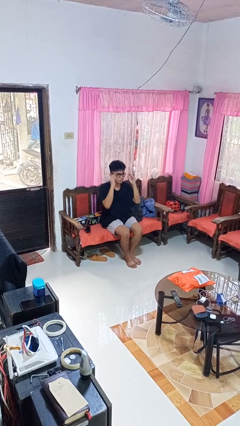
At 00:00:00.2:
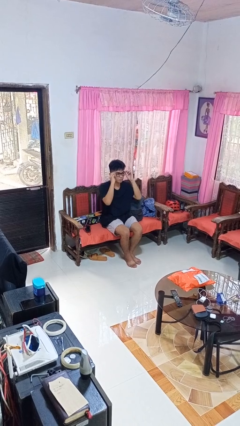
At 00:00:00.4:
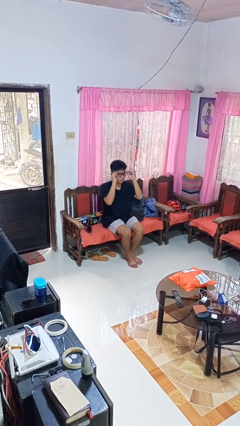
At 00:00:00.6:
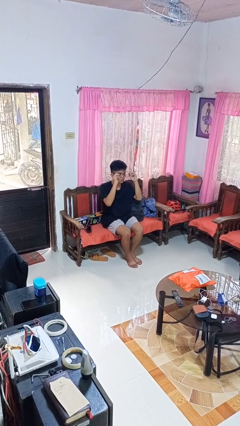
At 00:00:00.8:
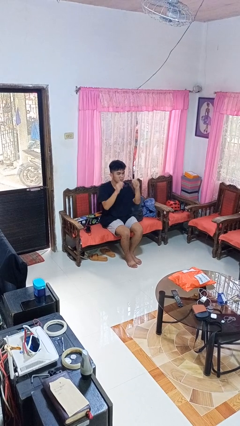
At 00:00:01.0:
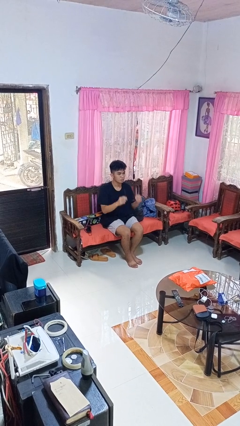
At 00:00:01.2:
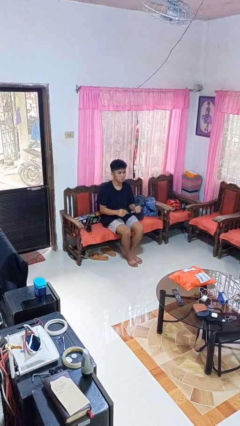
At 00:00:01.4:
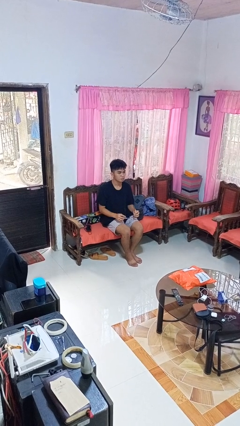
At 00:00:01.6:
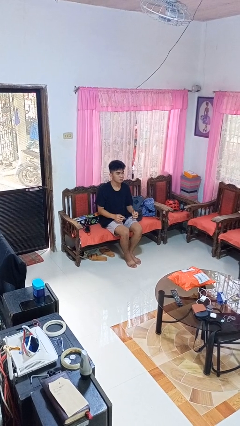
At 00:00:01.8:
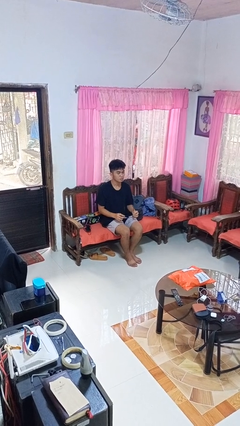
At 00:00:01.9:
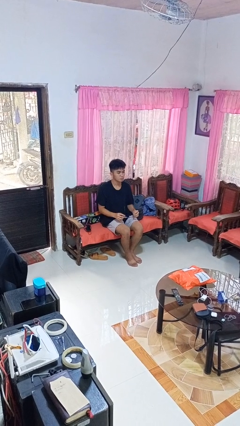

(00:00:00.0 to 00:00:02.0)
person takes off glasses

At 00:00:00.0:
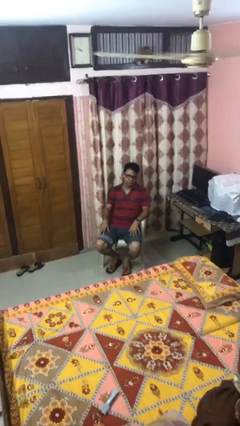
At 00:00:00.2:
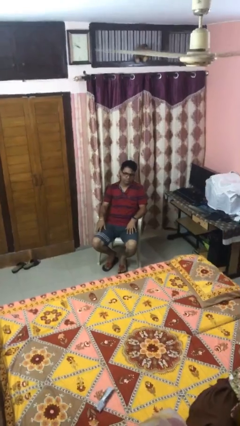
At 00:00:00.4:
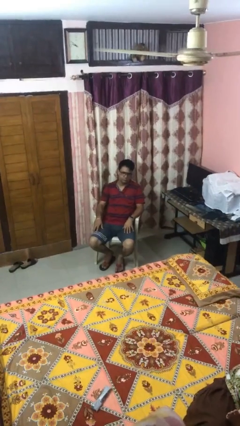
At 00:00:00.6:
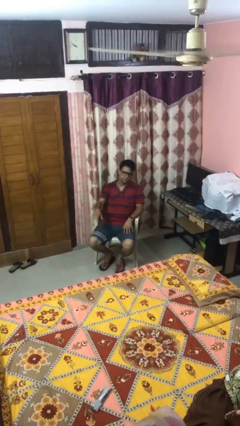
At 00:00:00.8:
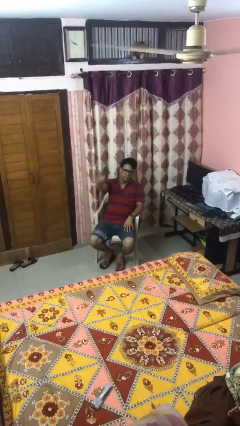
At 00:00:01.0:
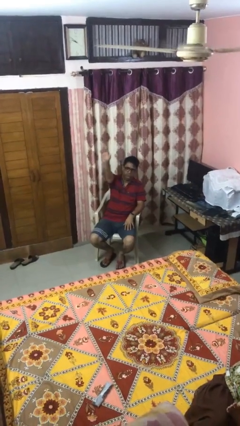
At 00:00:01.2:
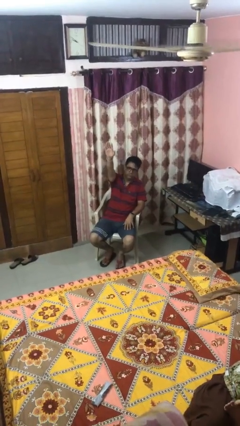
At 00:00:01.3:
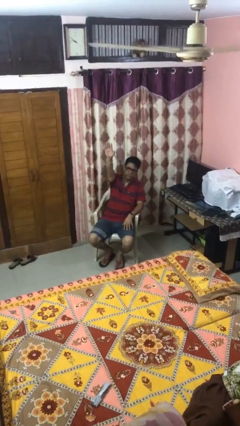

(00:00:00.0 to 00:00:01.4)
person gestures raise hand

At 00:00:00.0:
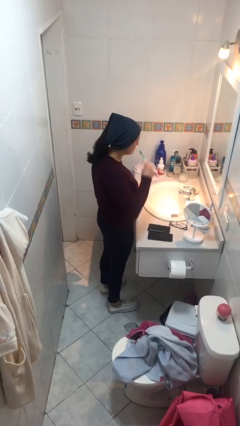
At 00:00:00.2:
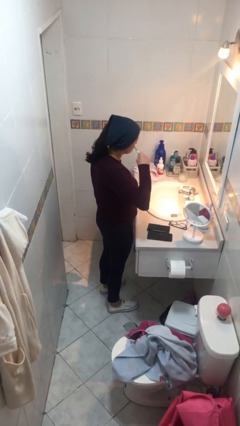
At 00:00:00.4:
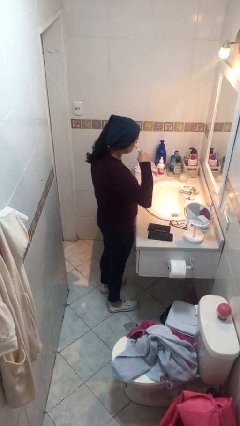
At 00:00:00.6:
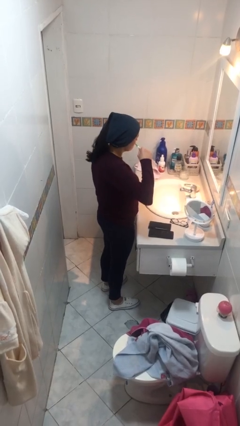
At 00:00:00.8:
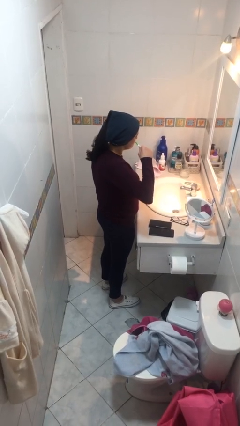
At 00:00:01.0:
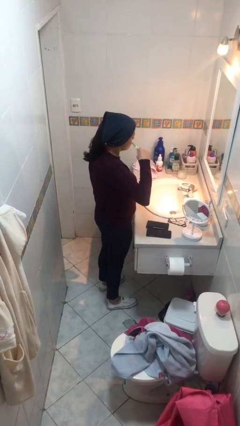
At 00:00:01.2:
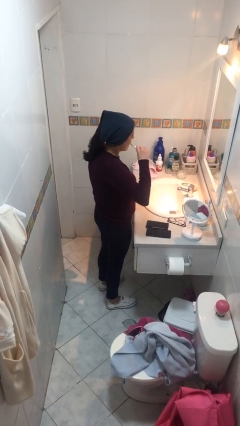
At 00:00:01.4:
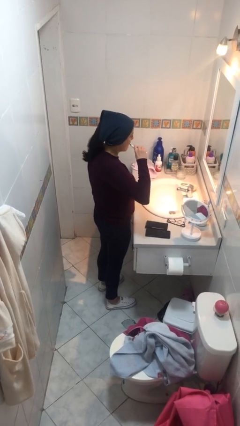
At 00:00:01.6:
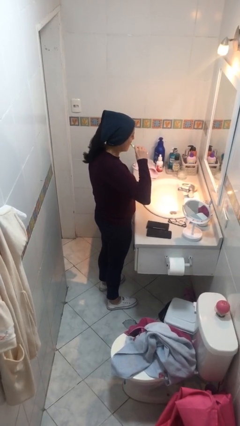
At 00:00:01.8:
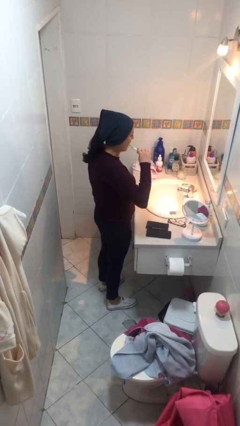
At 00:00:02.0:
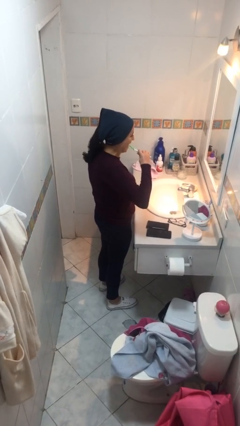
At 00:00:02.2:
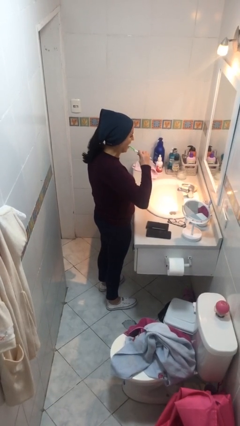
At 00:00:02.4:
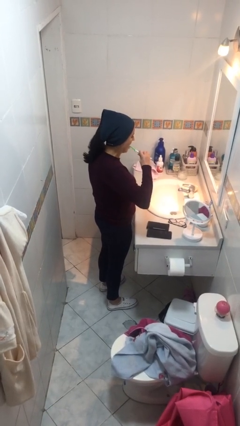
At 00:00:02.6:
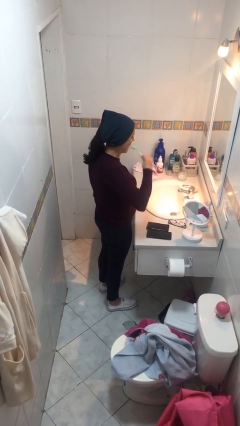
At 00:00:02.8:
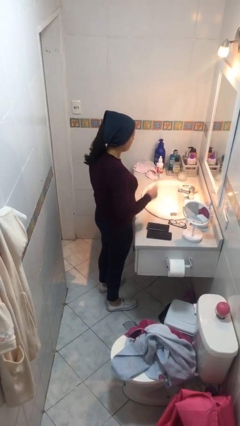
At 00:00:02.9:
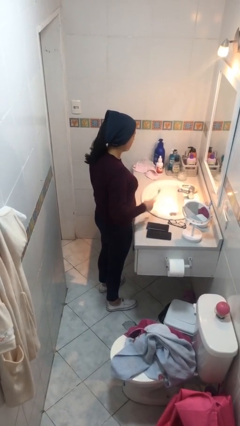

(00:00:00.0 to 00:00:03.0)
person brushes teeth

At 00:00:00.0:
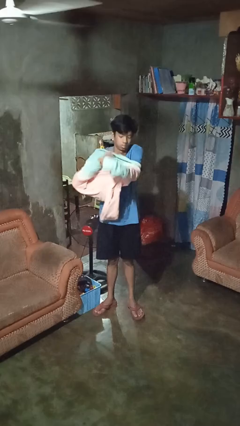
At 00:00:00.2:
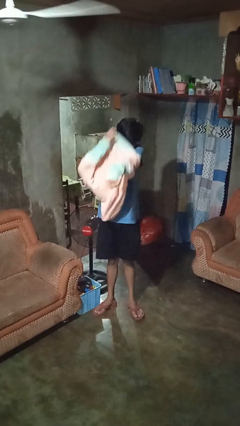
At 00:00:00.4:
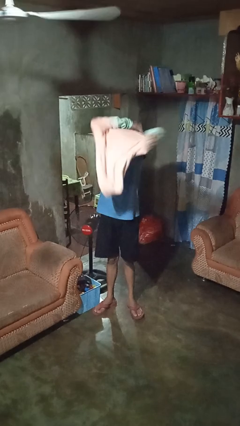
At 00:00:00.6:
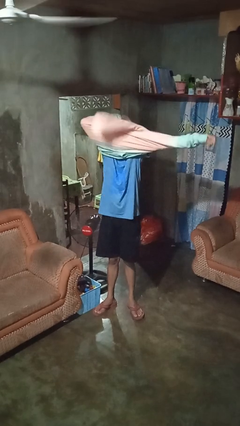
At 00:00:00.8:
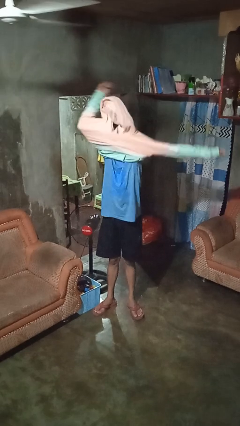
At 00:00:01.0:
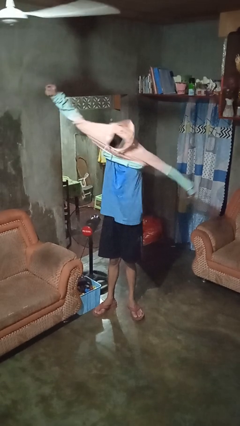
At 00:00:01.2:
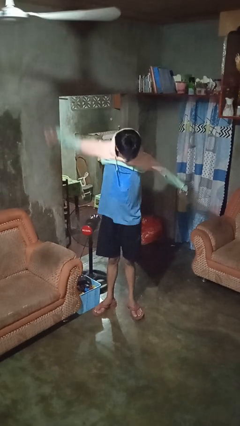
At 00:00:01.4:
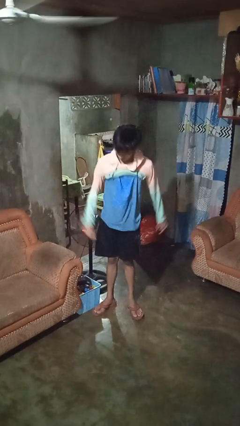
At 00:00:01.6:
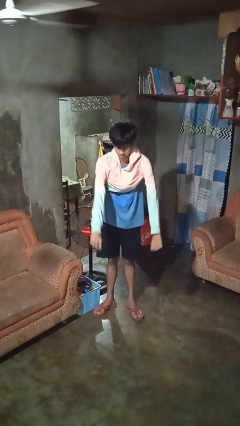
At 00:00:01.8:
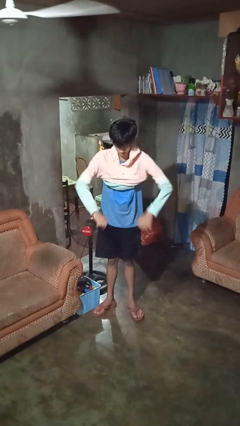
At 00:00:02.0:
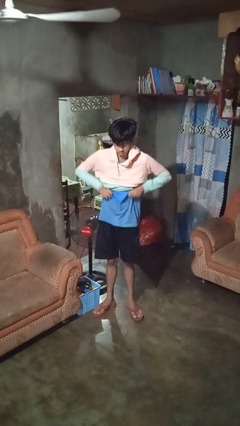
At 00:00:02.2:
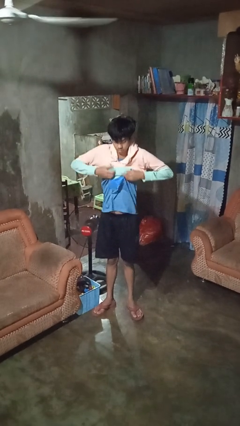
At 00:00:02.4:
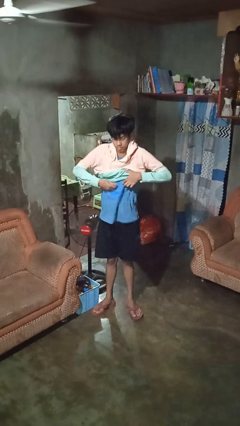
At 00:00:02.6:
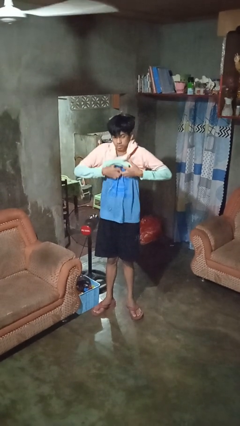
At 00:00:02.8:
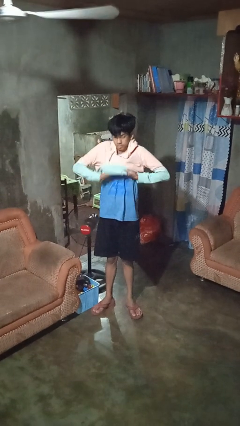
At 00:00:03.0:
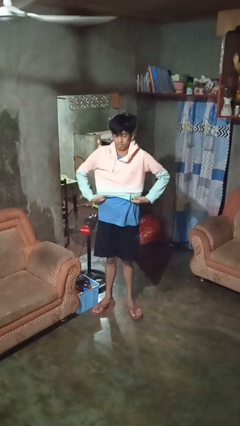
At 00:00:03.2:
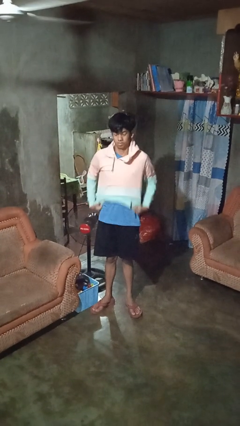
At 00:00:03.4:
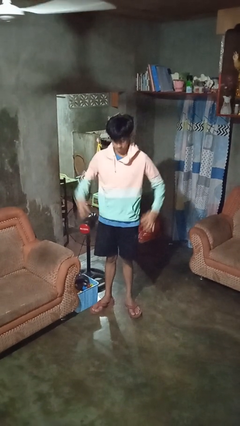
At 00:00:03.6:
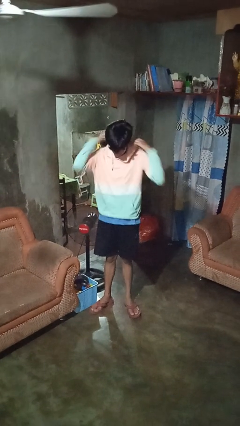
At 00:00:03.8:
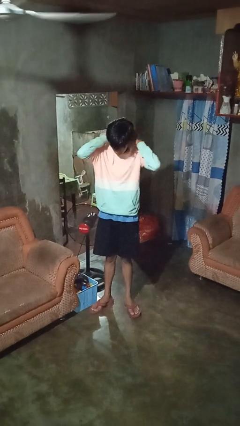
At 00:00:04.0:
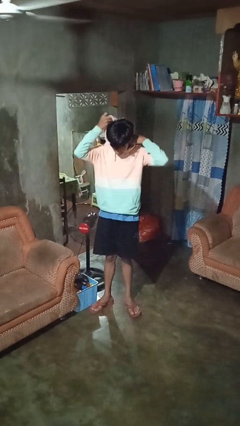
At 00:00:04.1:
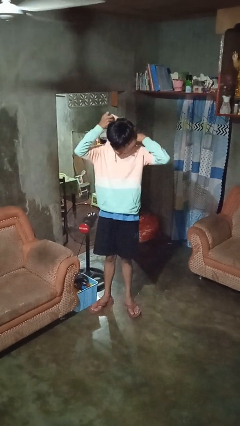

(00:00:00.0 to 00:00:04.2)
person puts on hoodie

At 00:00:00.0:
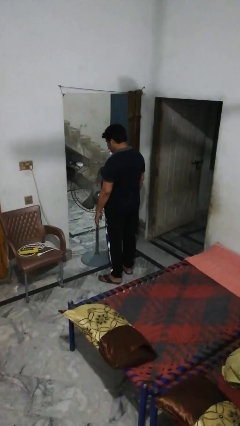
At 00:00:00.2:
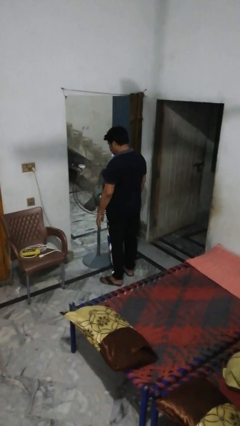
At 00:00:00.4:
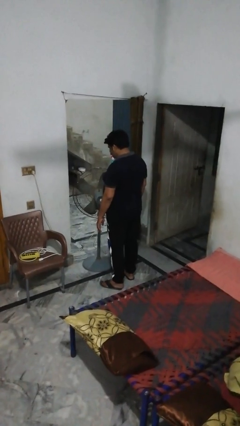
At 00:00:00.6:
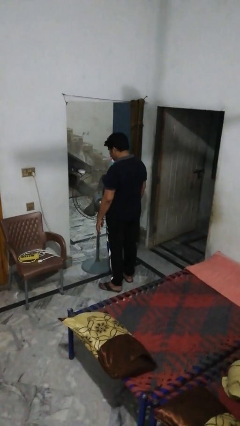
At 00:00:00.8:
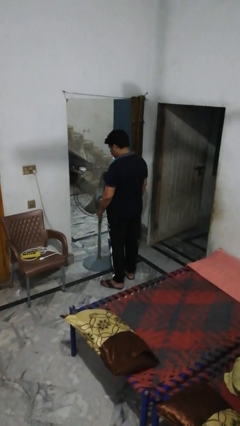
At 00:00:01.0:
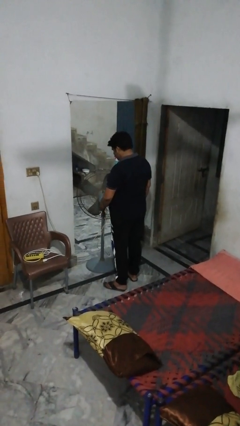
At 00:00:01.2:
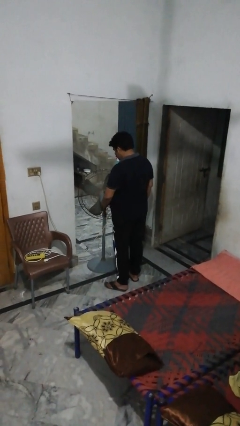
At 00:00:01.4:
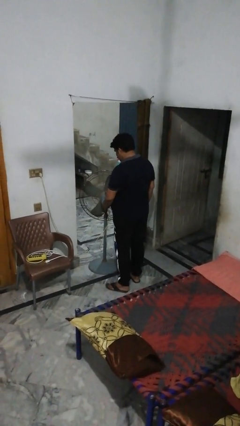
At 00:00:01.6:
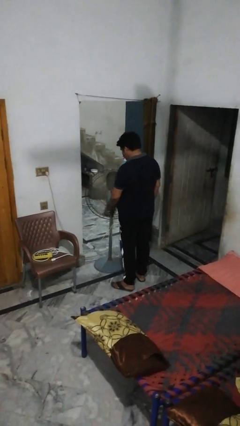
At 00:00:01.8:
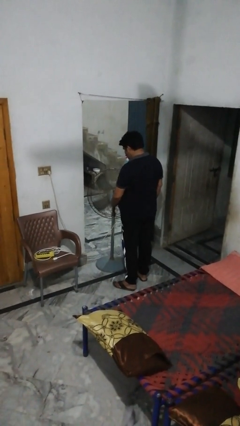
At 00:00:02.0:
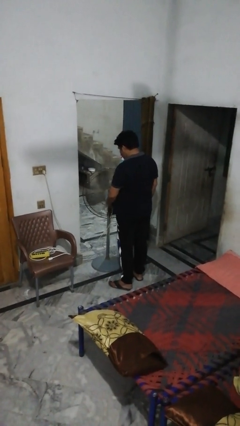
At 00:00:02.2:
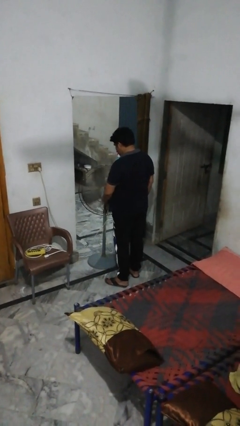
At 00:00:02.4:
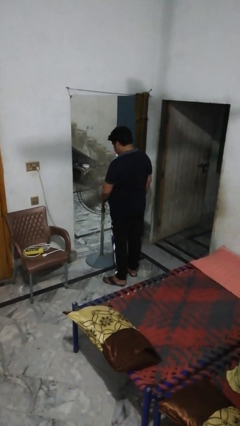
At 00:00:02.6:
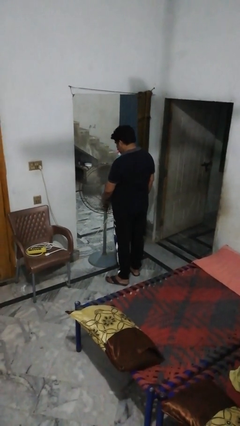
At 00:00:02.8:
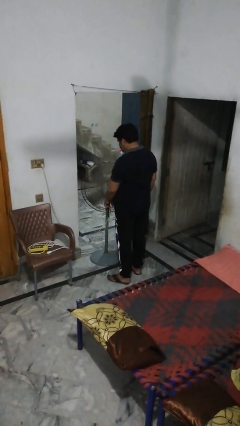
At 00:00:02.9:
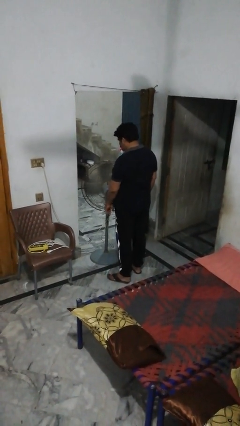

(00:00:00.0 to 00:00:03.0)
person turns on fan

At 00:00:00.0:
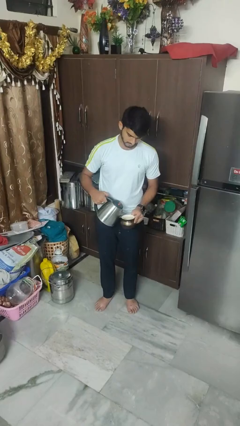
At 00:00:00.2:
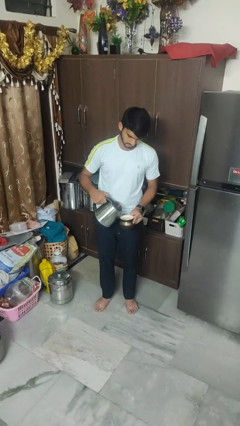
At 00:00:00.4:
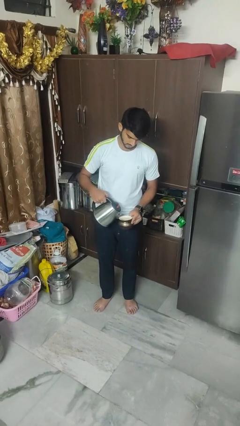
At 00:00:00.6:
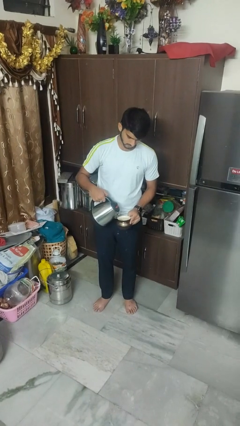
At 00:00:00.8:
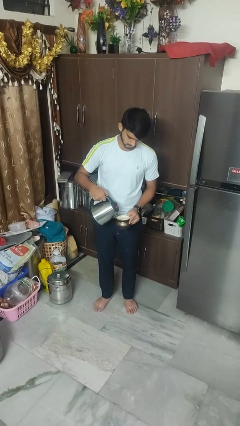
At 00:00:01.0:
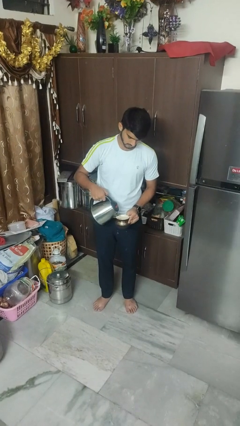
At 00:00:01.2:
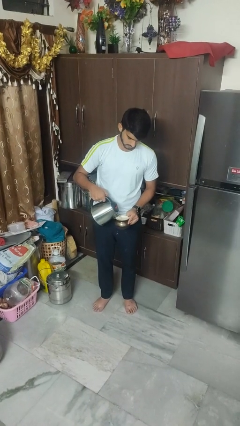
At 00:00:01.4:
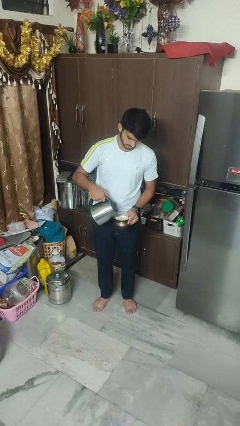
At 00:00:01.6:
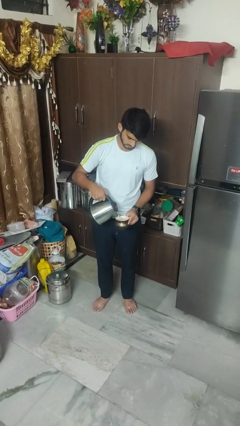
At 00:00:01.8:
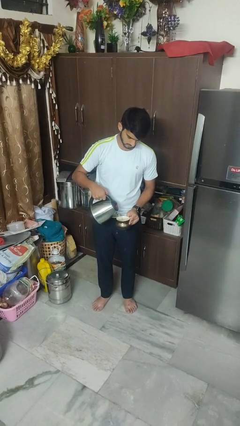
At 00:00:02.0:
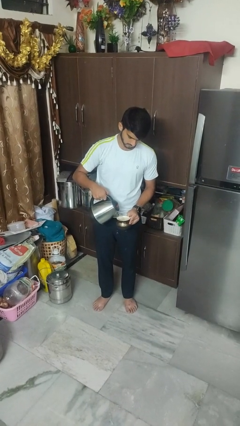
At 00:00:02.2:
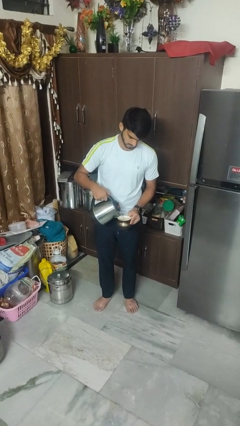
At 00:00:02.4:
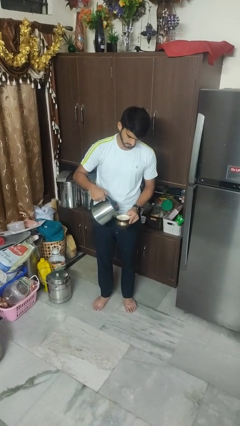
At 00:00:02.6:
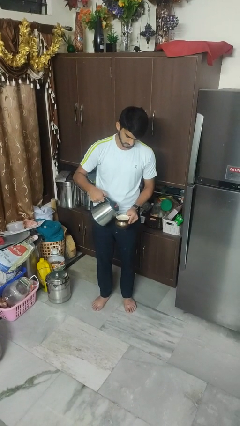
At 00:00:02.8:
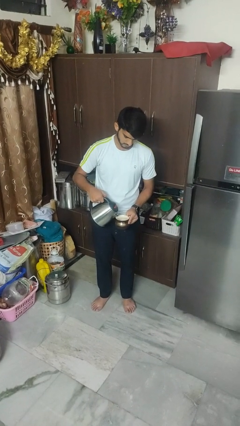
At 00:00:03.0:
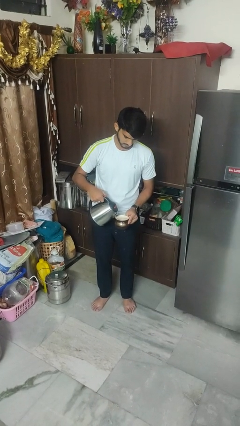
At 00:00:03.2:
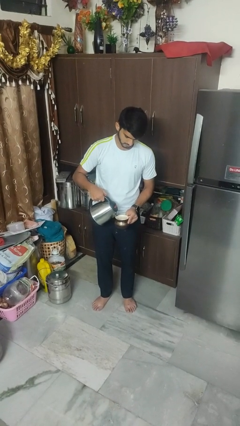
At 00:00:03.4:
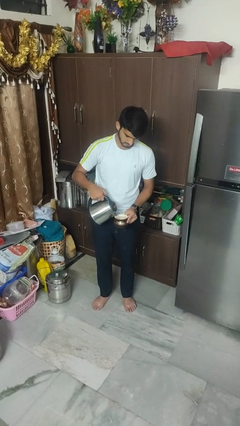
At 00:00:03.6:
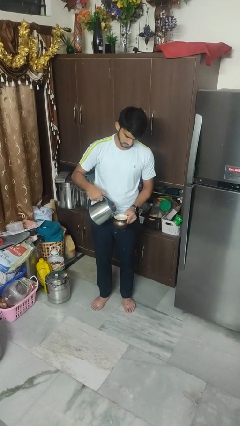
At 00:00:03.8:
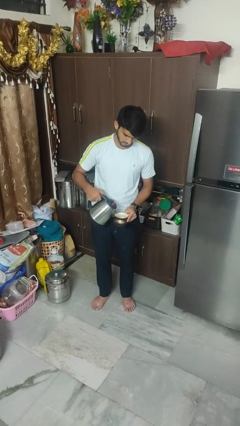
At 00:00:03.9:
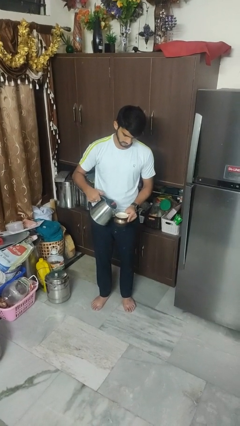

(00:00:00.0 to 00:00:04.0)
person pours coffee into mug
